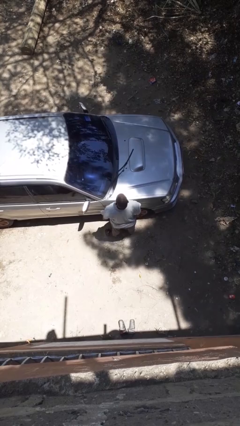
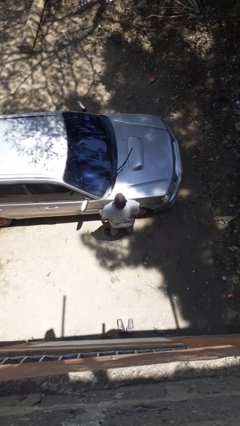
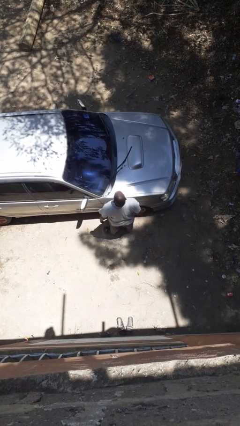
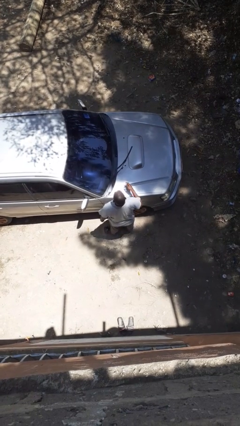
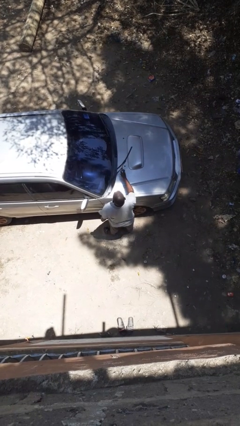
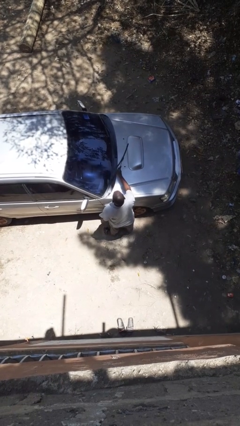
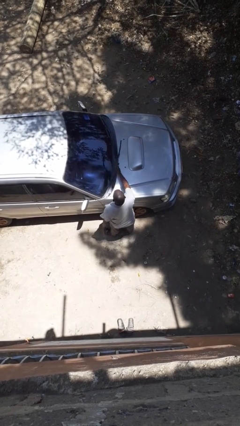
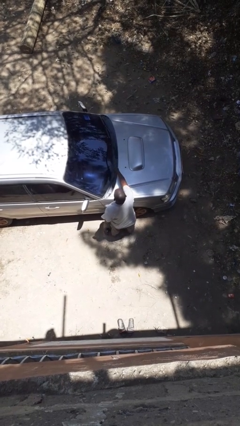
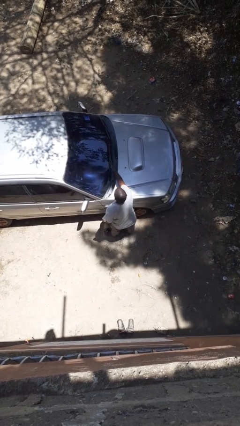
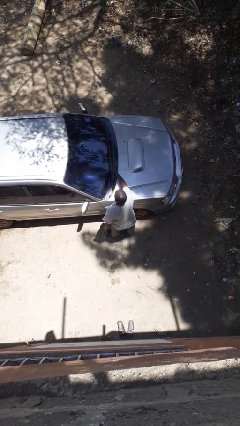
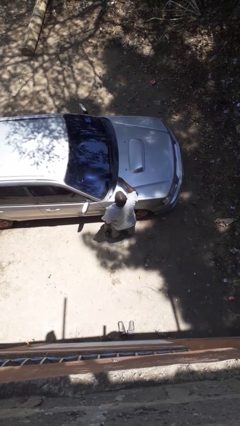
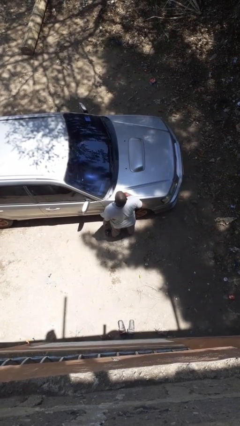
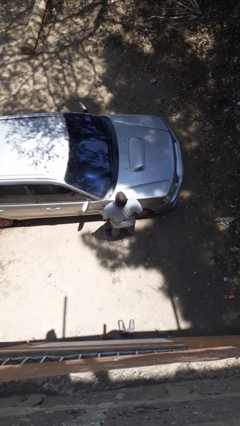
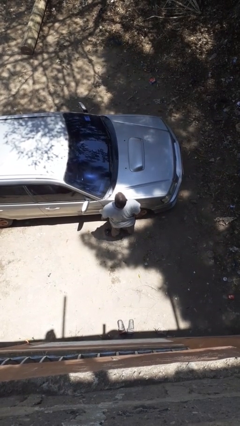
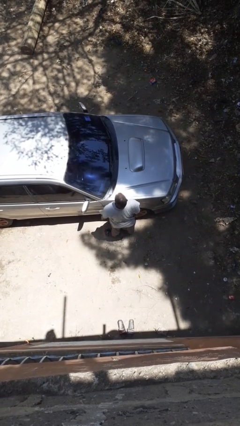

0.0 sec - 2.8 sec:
person flips down car wipers

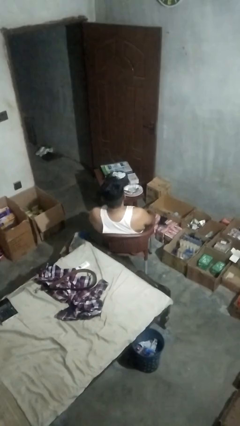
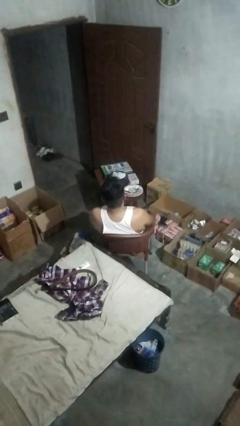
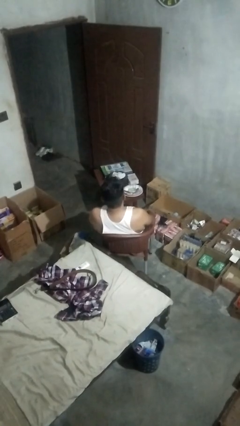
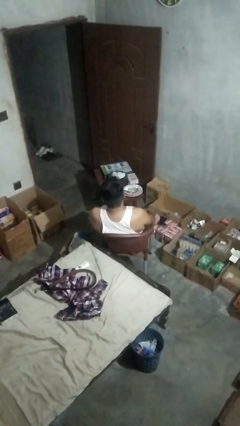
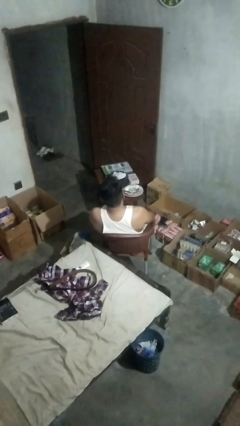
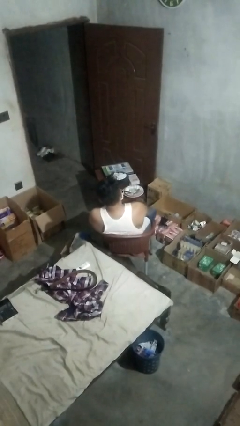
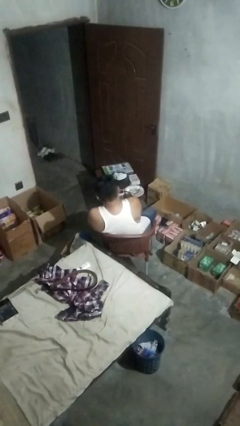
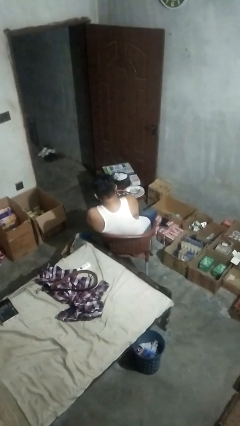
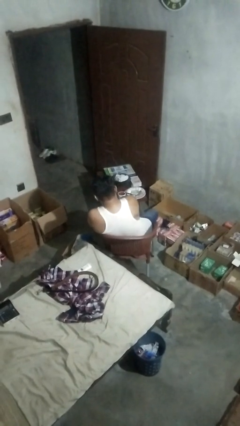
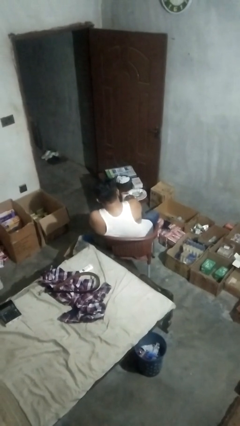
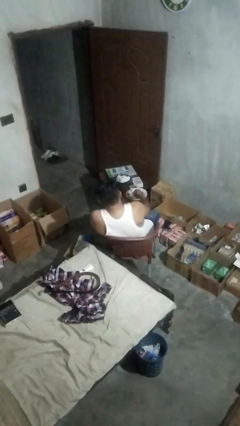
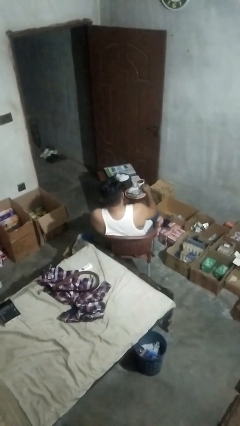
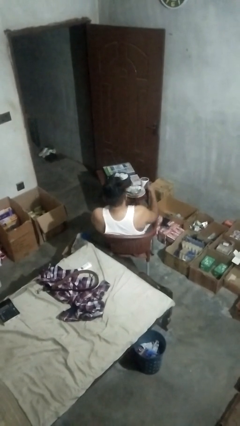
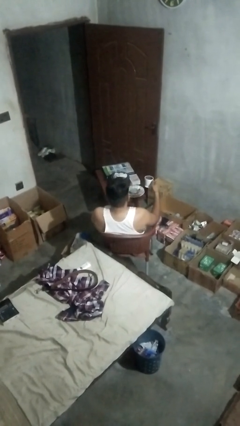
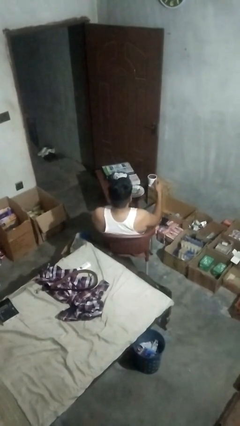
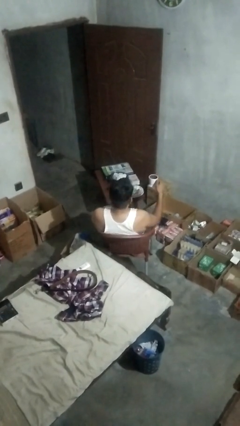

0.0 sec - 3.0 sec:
person picks up object from table

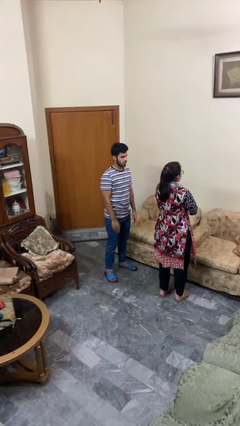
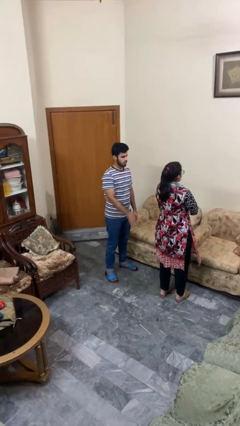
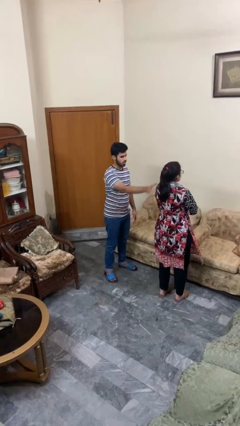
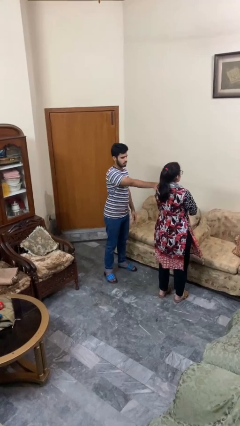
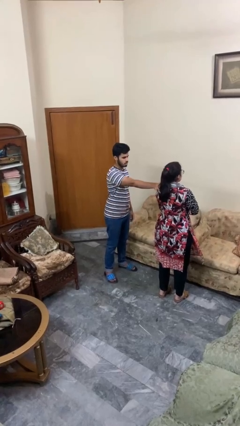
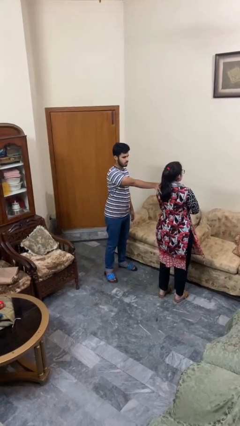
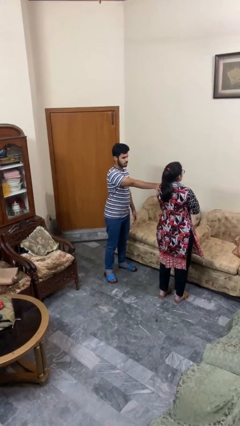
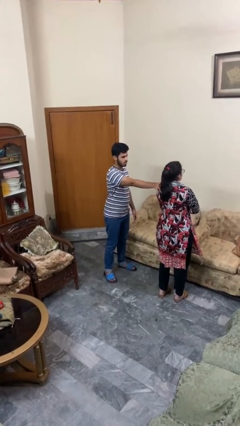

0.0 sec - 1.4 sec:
person grabs person by shoulder

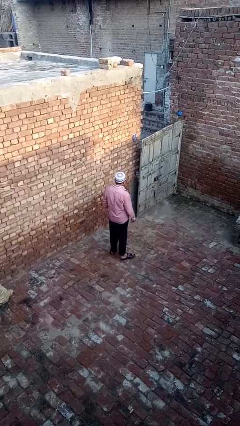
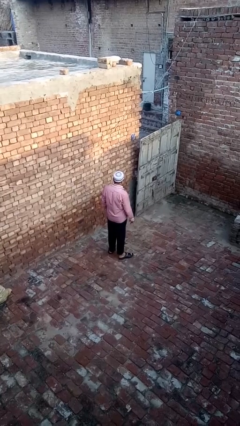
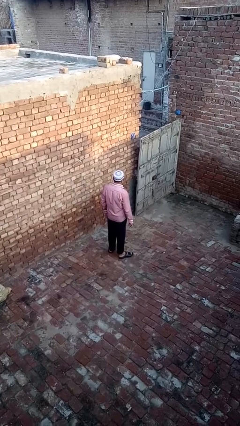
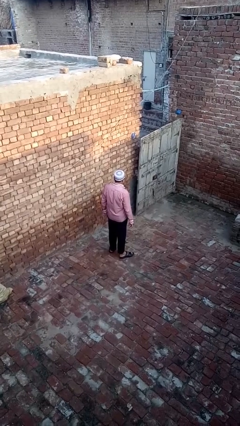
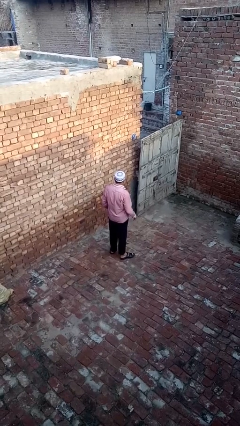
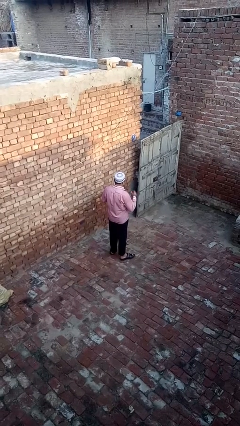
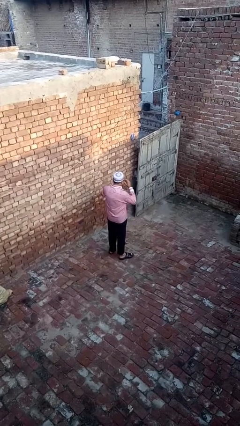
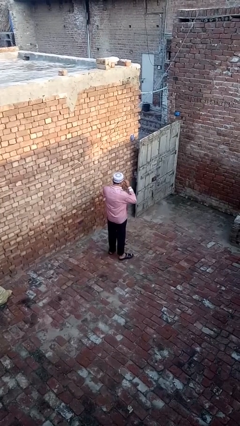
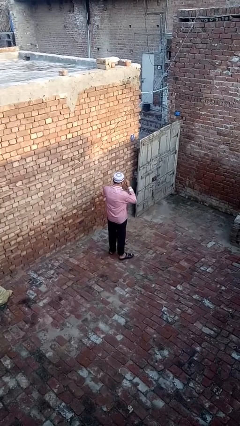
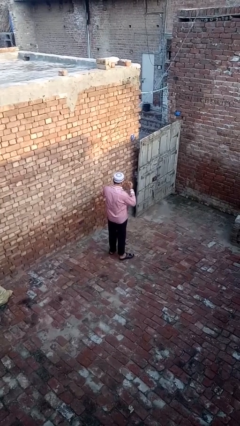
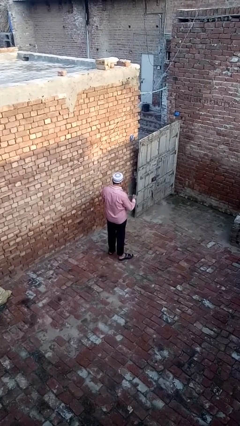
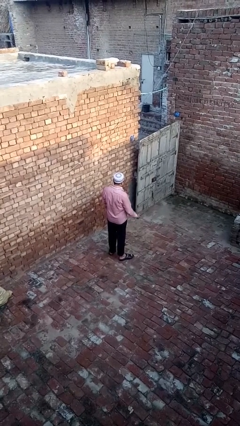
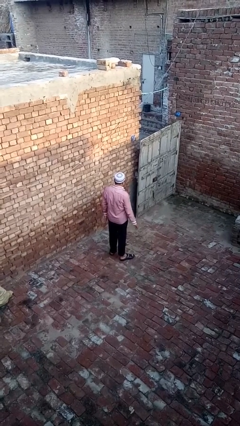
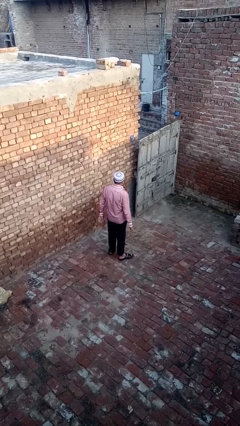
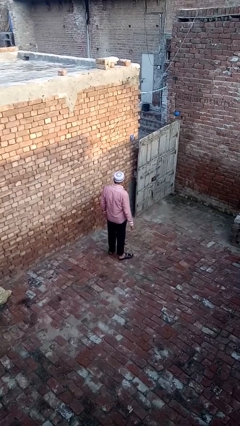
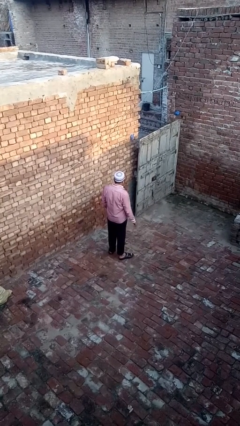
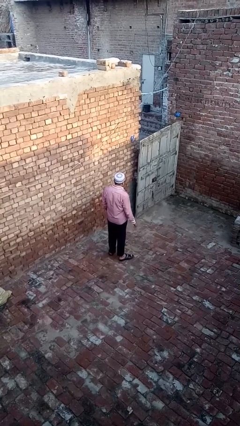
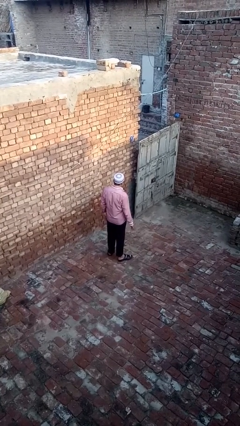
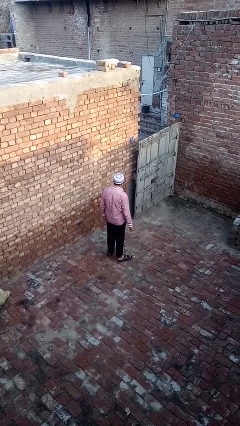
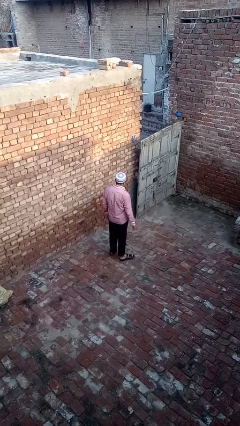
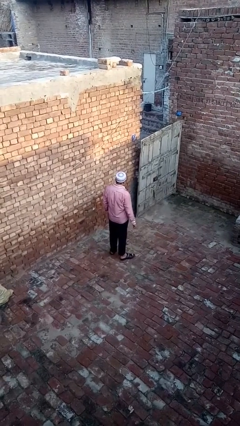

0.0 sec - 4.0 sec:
person takes off glasses

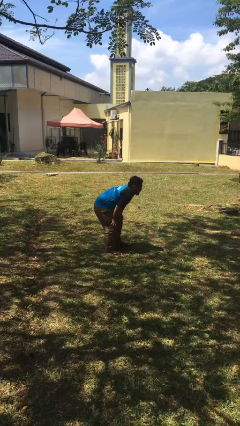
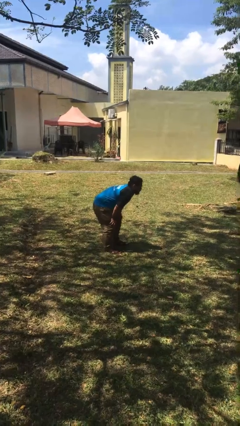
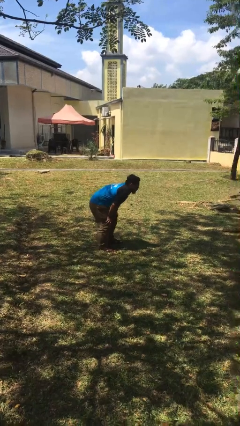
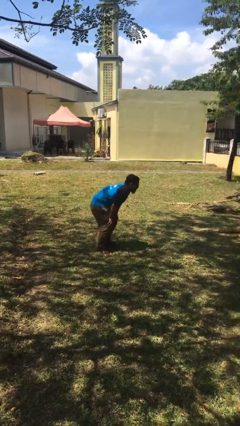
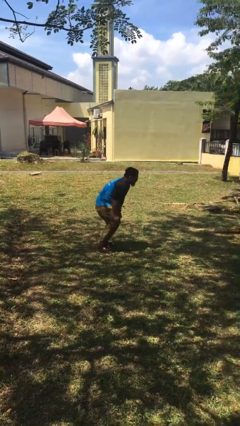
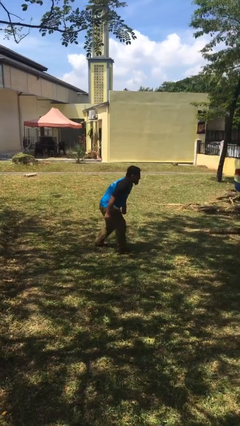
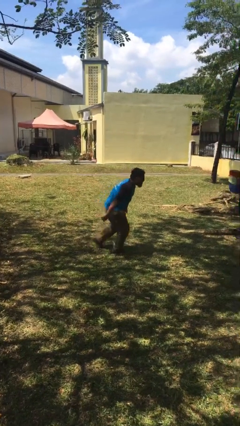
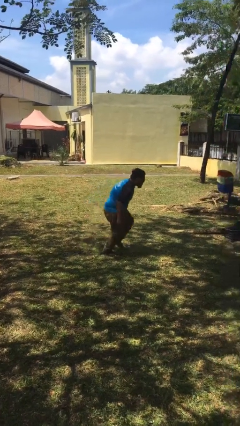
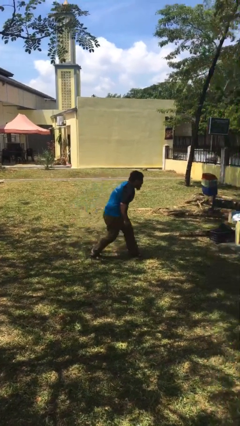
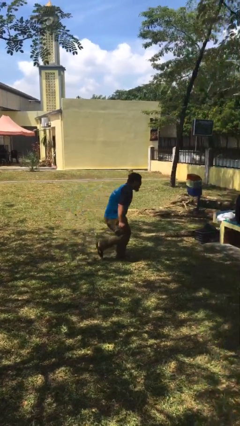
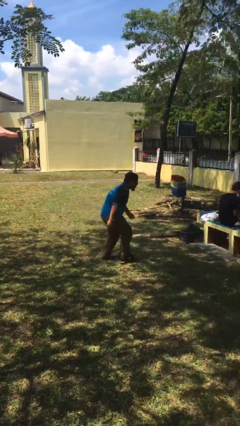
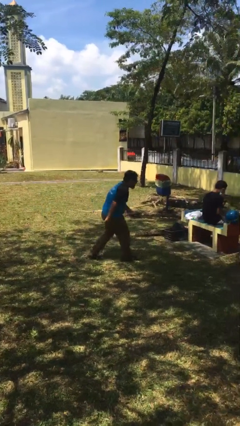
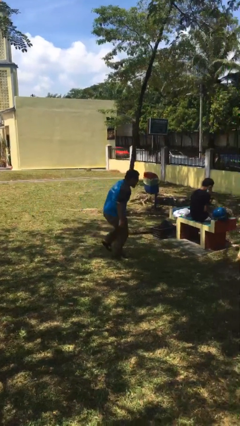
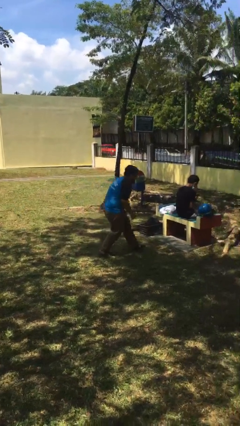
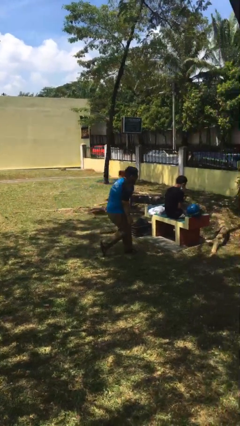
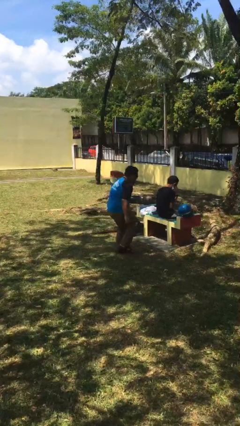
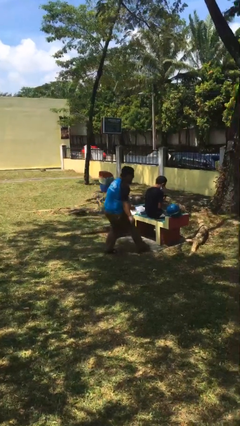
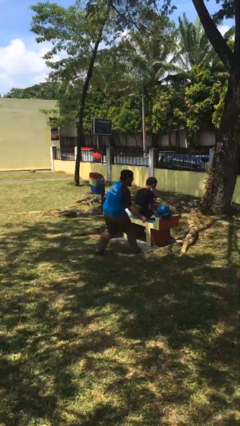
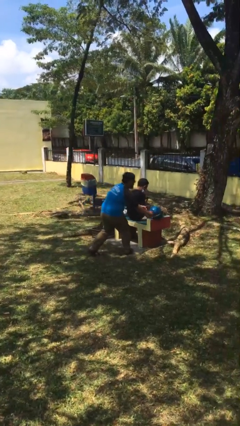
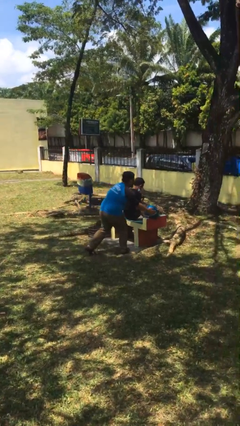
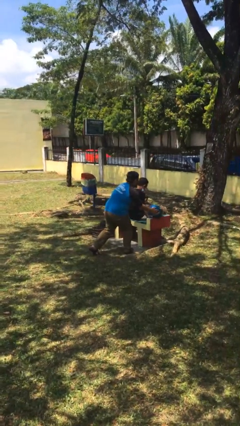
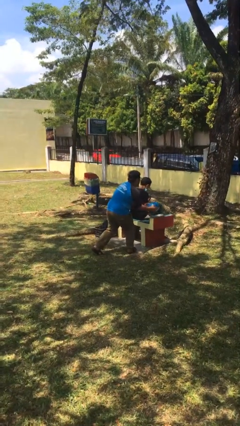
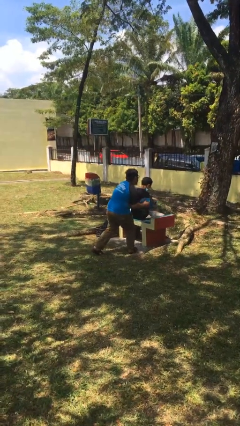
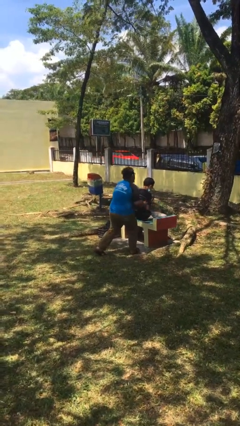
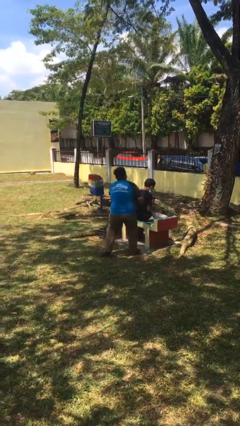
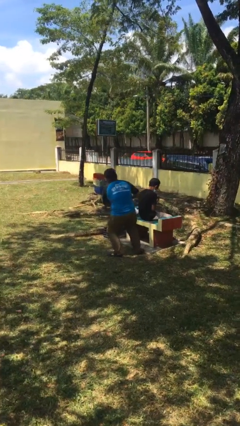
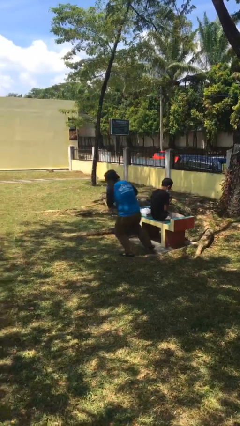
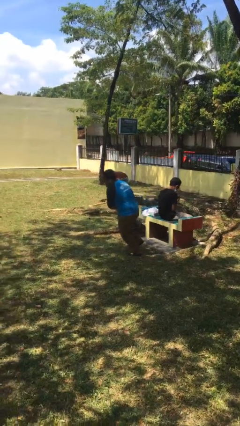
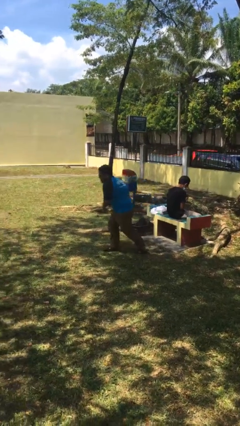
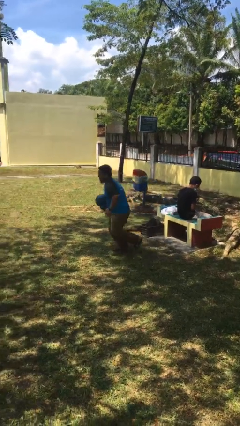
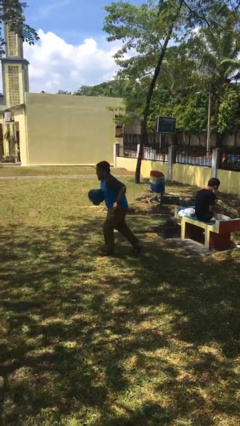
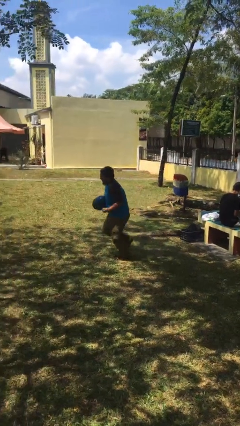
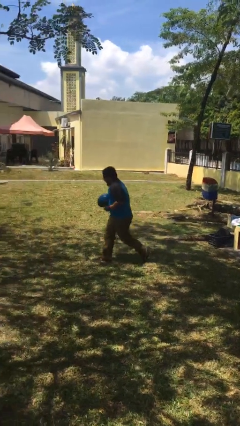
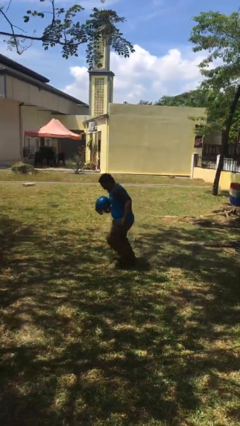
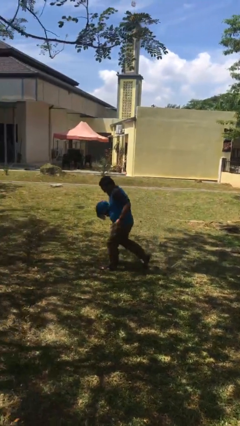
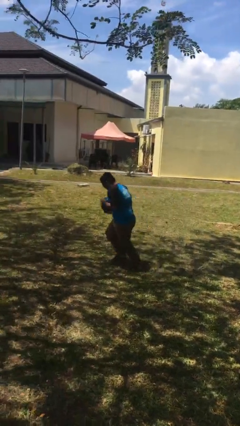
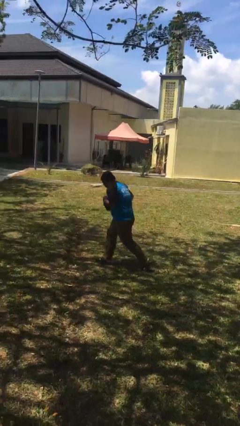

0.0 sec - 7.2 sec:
person steals object from person
